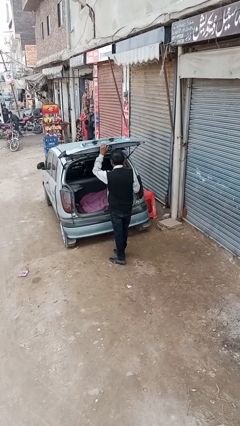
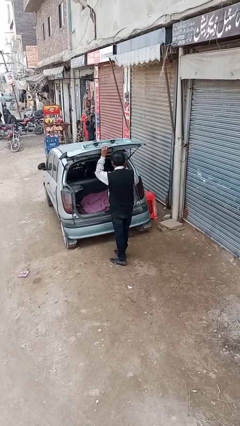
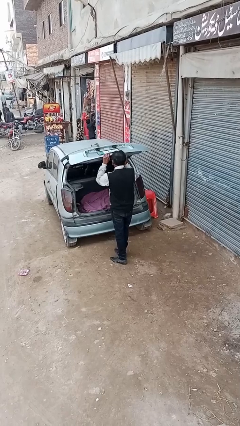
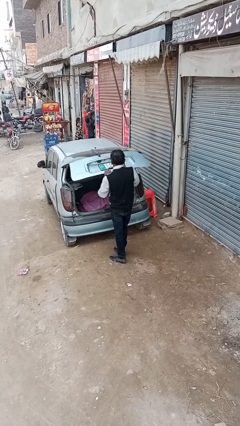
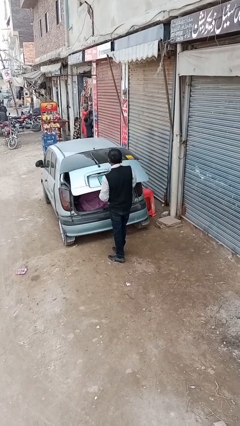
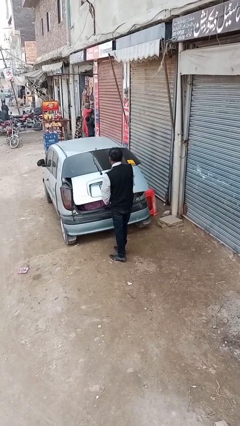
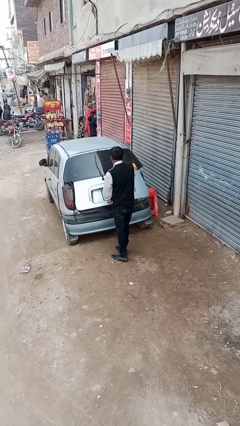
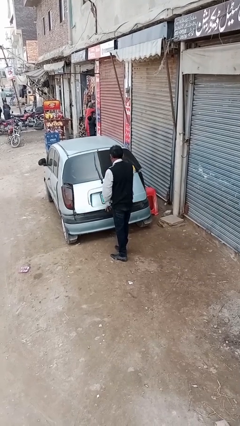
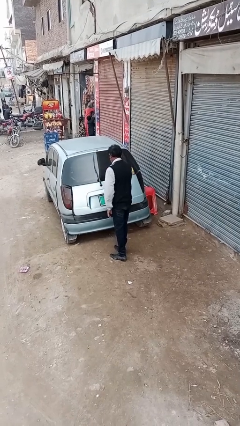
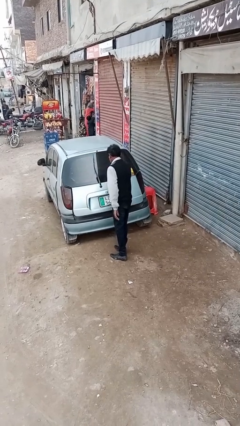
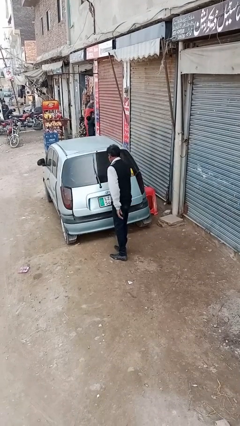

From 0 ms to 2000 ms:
person closes car trunk

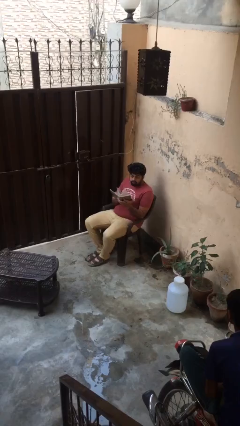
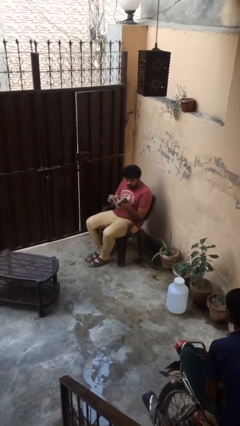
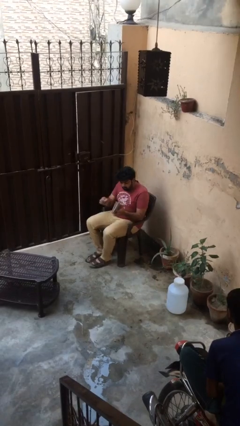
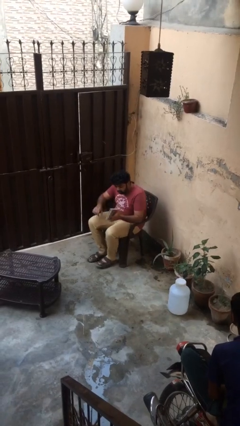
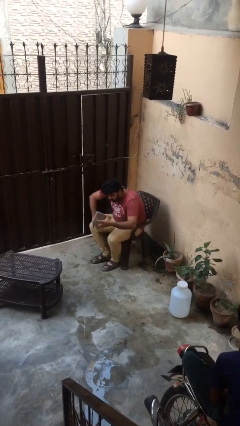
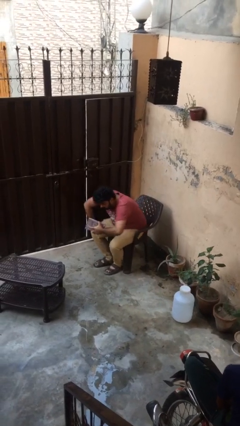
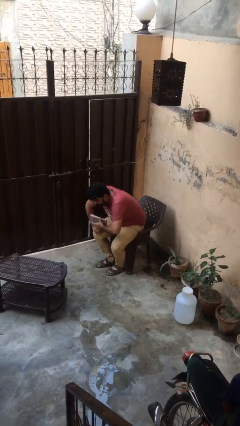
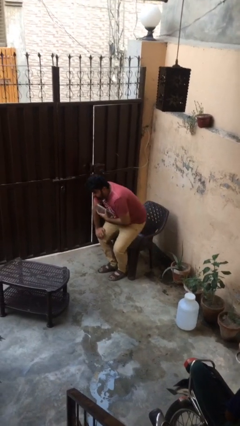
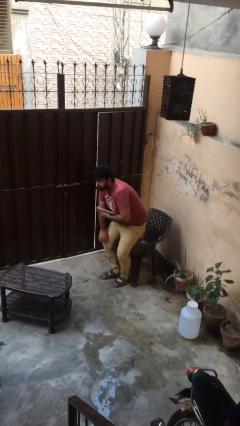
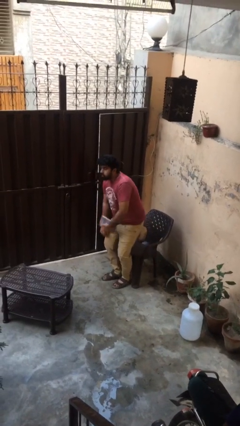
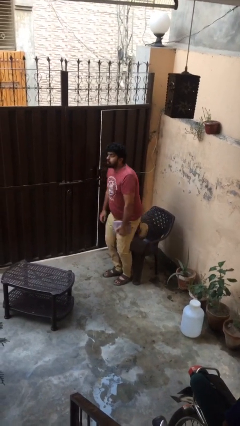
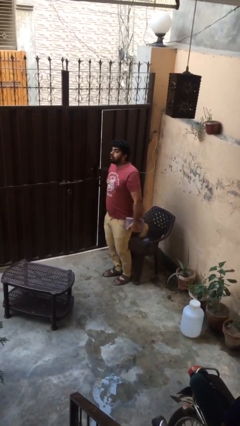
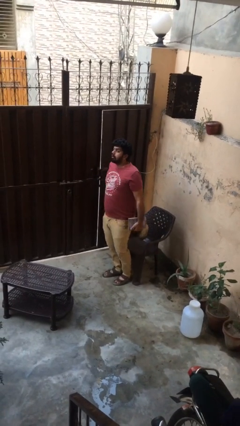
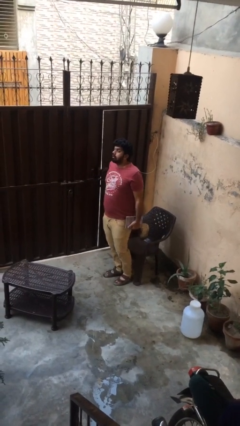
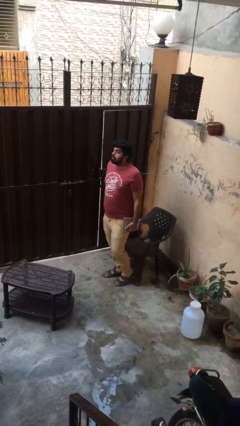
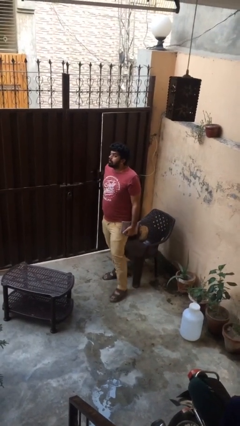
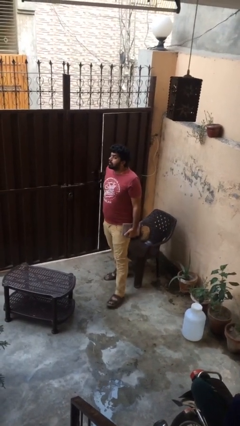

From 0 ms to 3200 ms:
person stands up

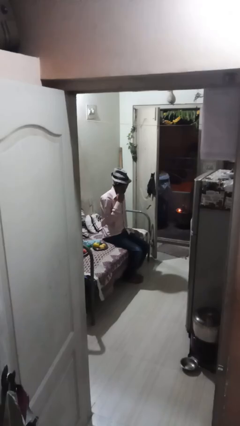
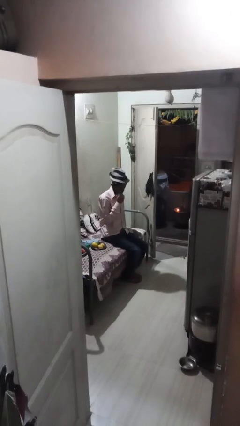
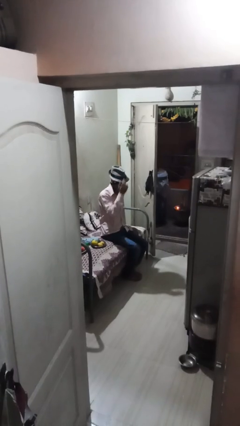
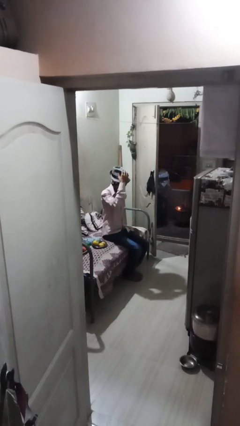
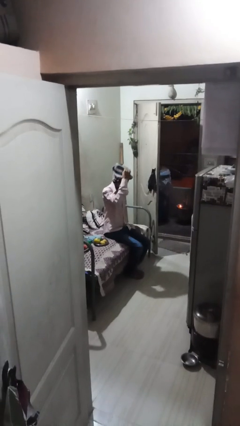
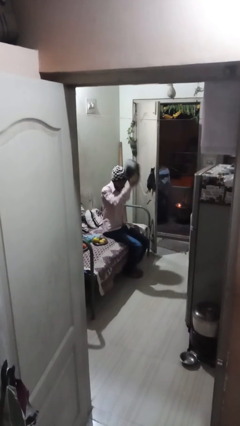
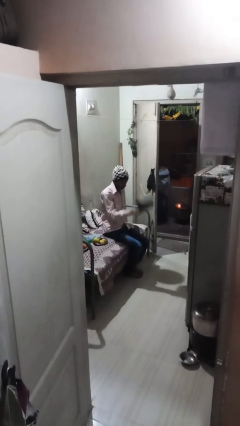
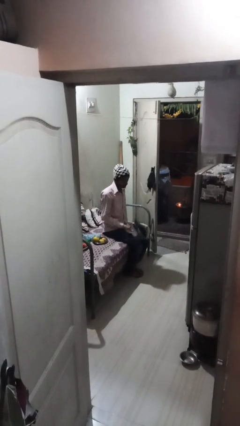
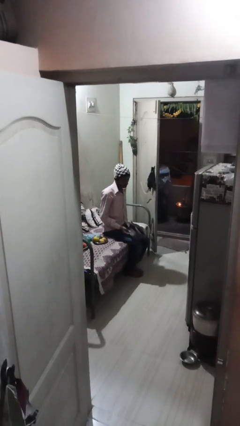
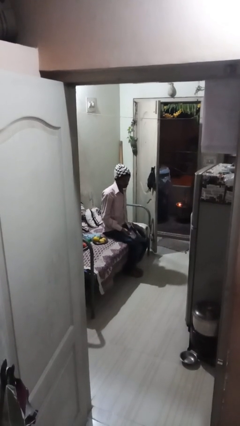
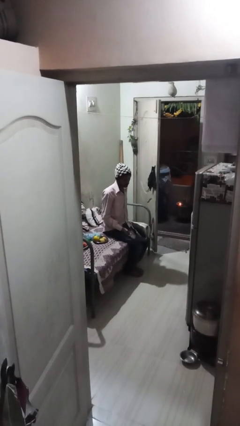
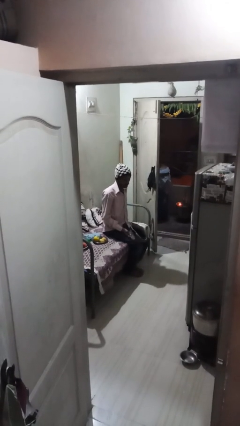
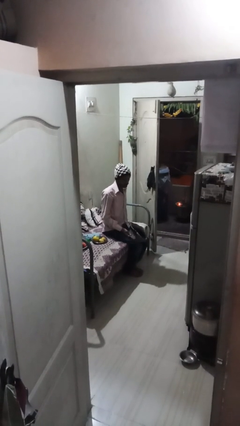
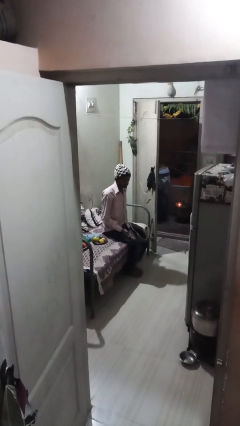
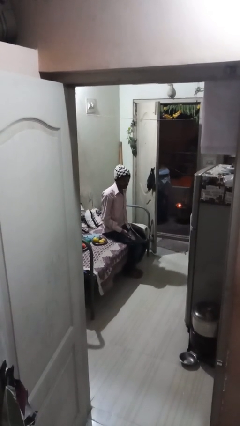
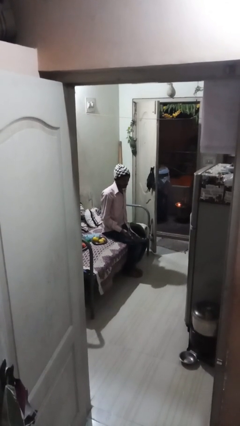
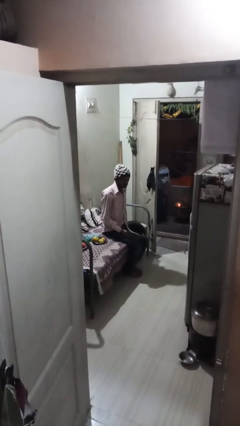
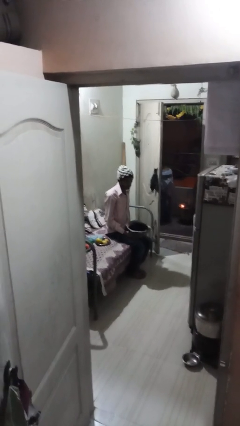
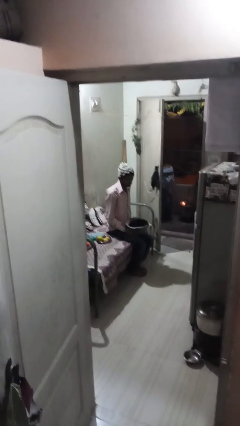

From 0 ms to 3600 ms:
person takes off hat

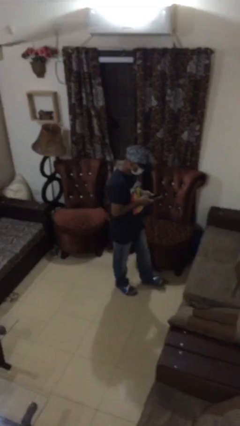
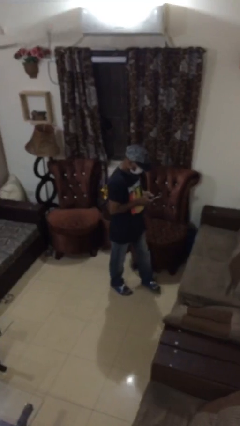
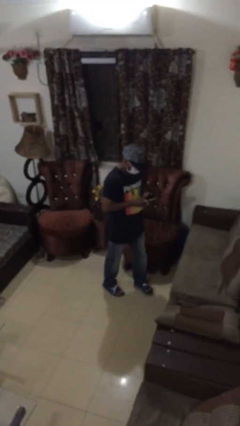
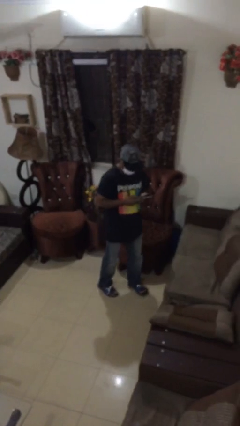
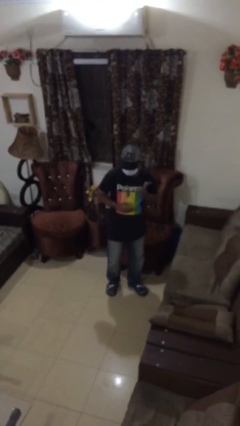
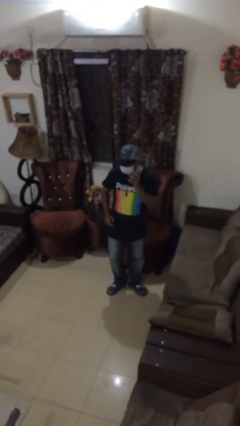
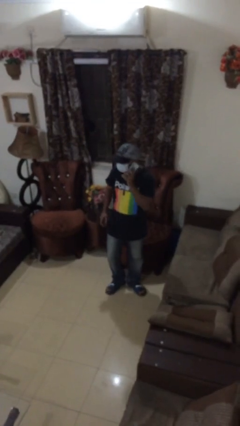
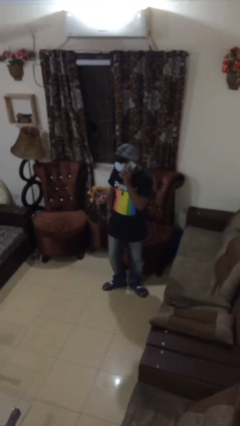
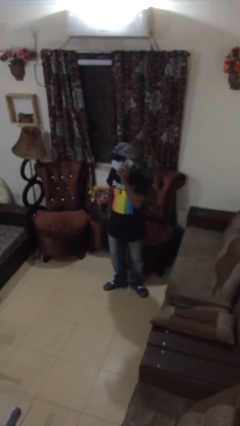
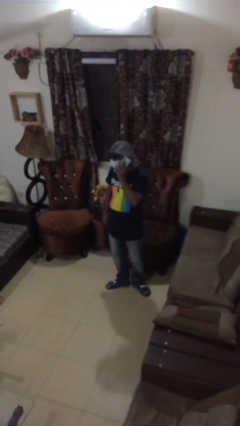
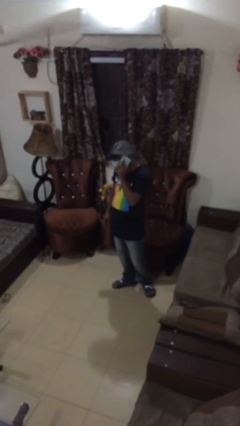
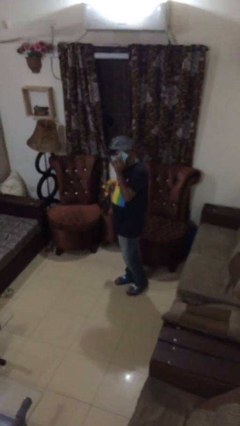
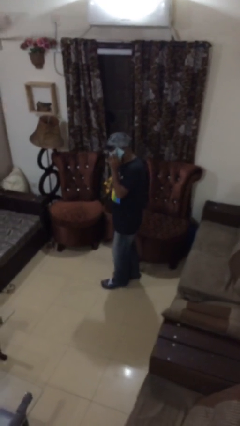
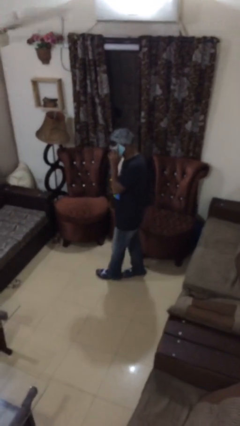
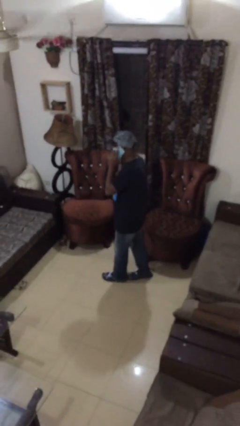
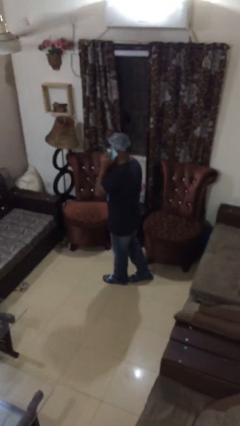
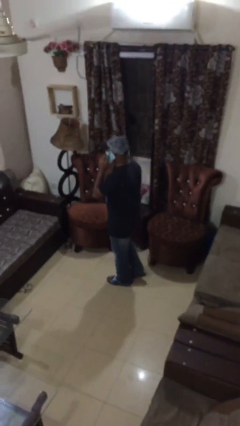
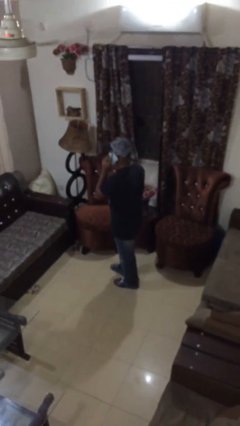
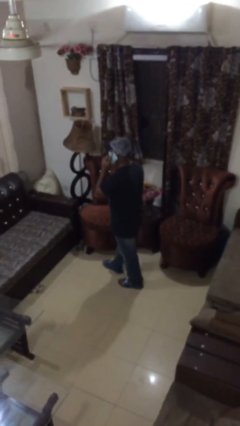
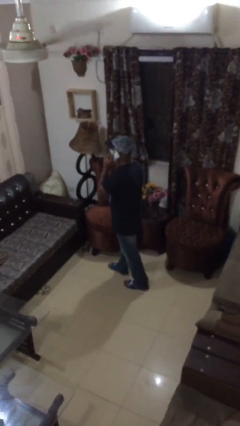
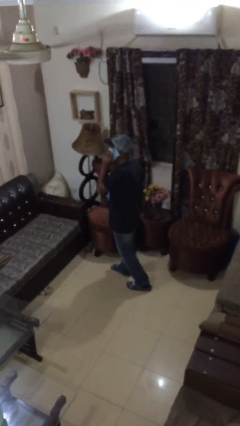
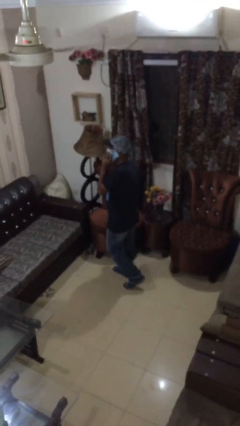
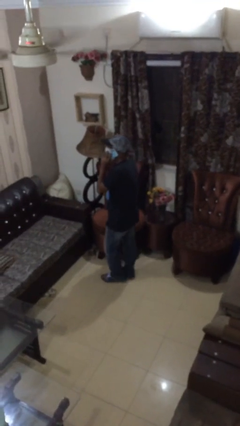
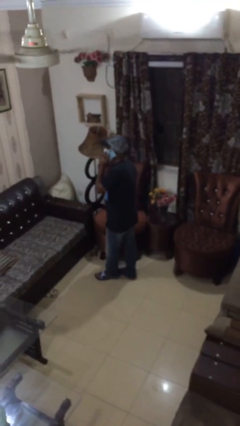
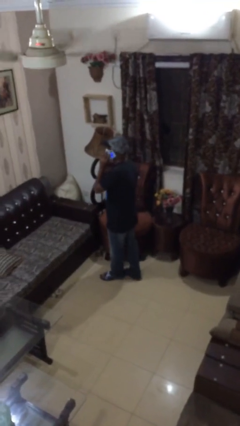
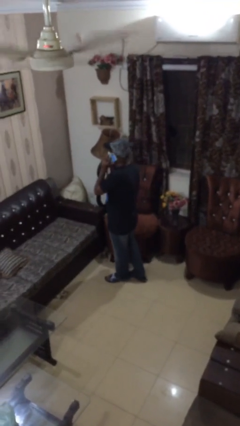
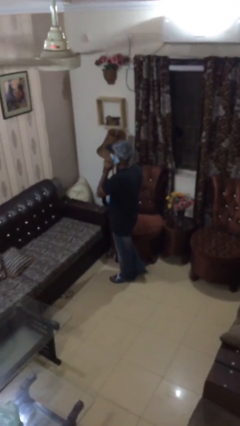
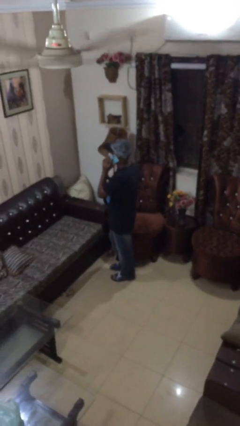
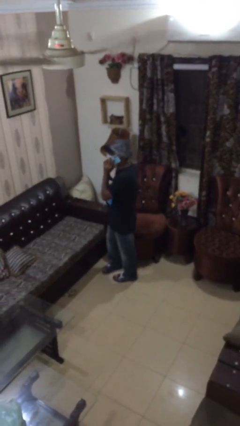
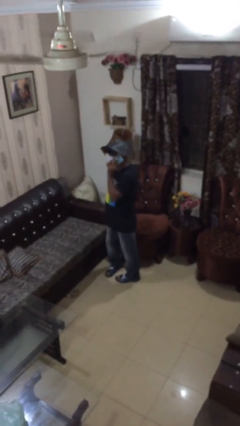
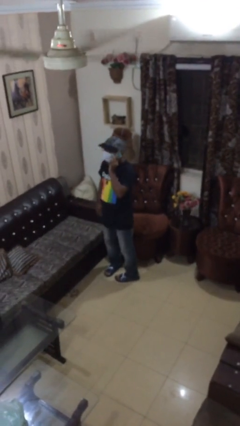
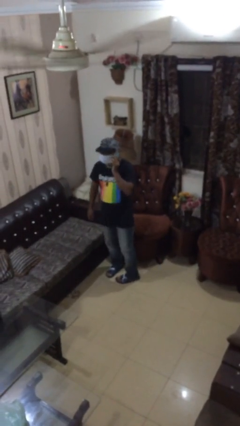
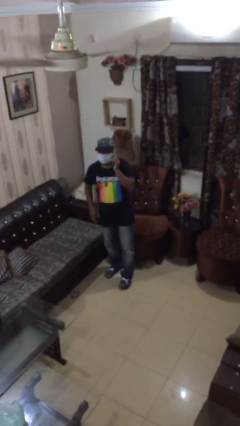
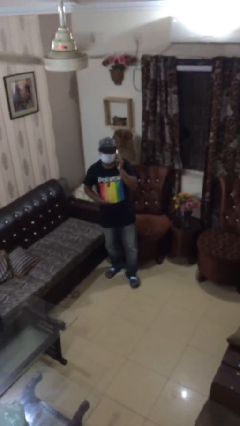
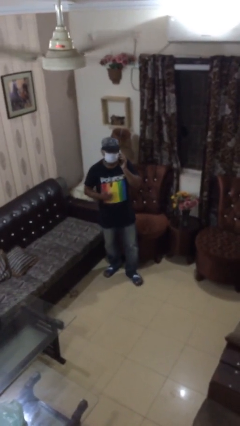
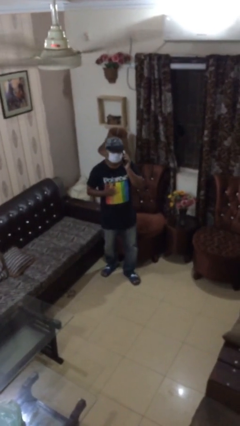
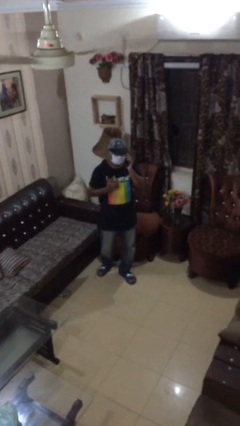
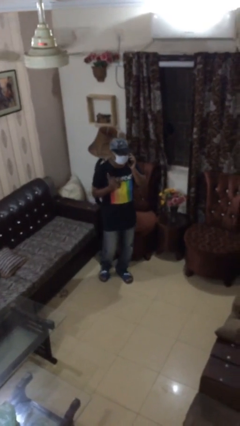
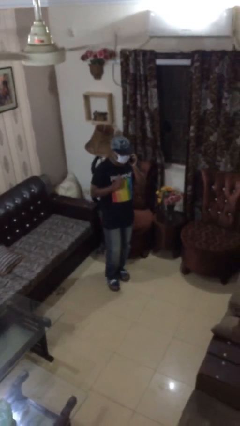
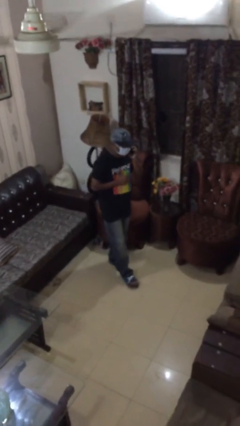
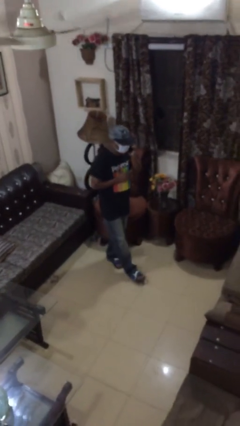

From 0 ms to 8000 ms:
person talks on phone

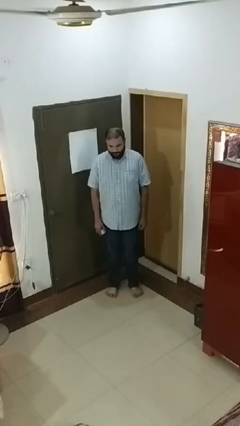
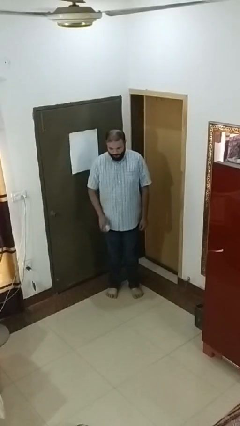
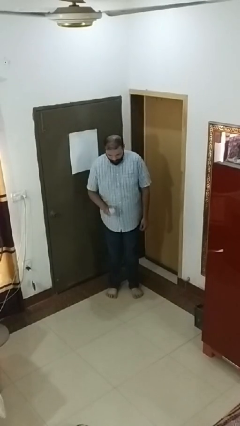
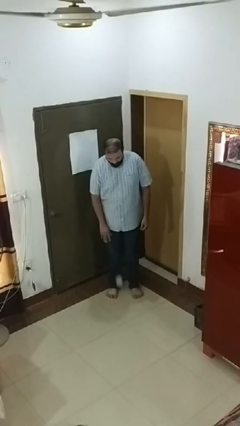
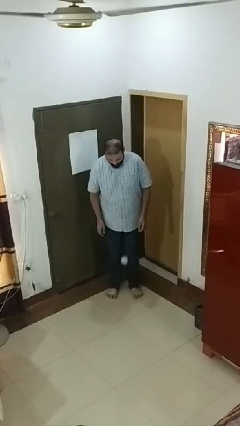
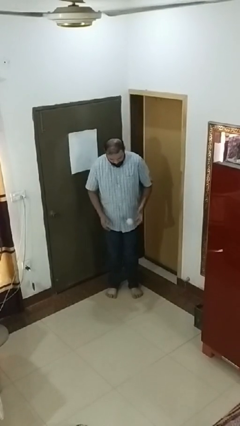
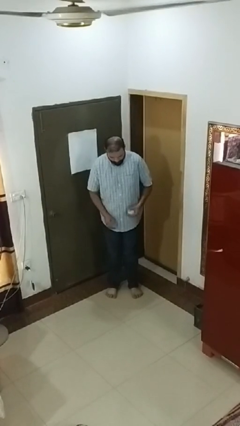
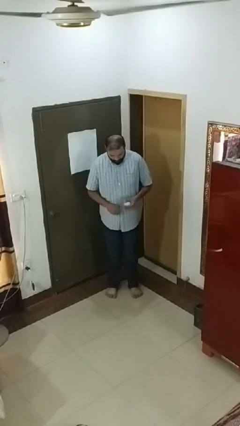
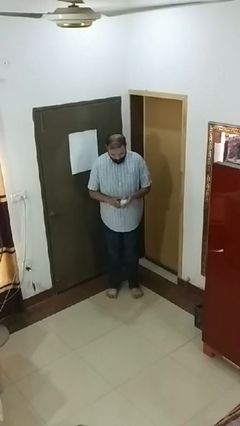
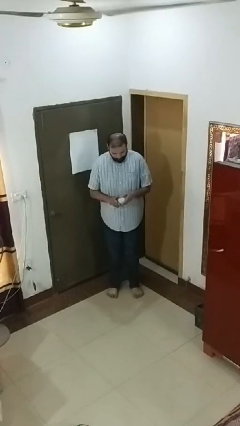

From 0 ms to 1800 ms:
person bounces ball on floor
